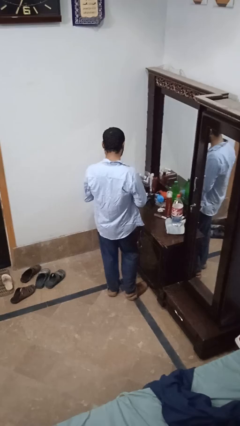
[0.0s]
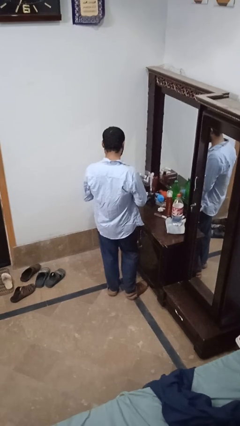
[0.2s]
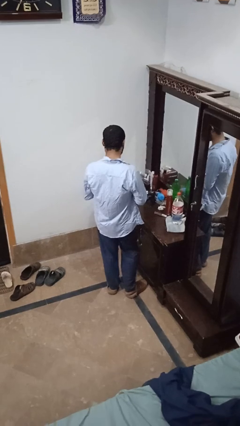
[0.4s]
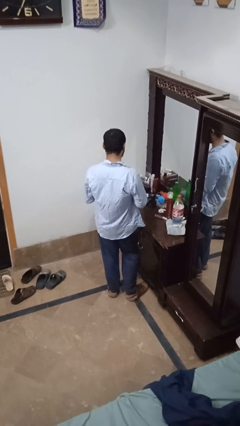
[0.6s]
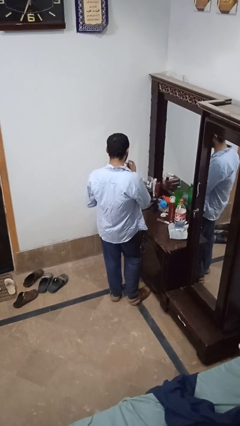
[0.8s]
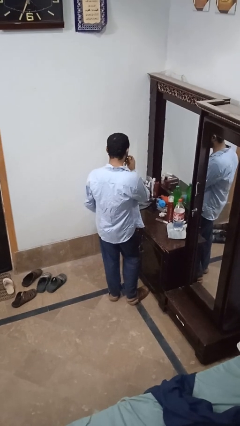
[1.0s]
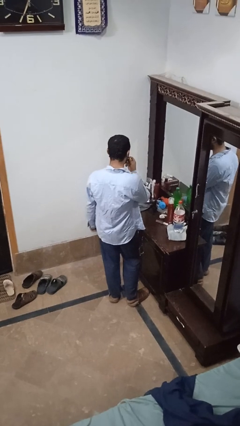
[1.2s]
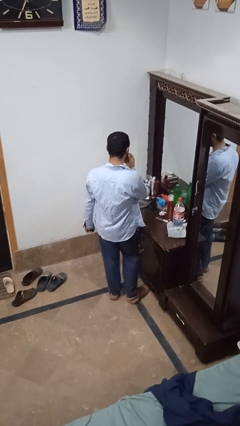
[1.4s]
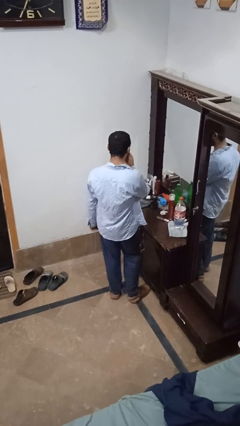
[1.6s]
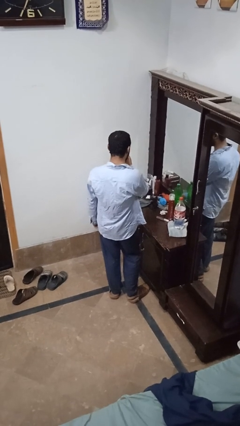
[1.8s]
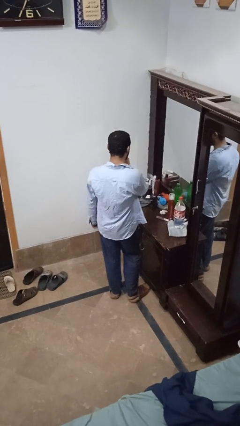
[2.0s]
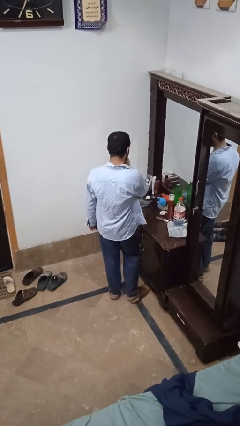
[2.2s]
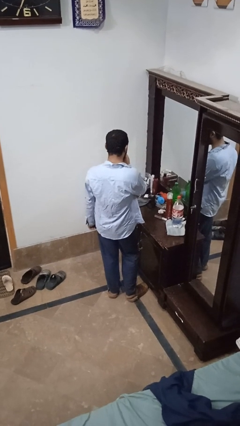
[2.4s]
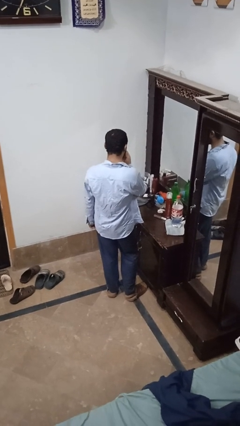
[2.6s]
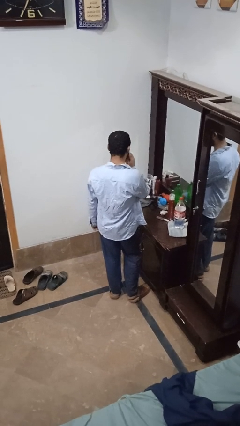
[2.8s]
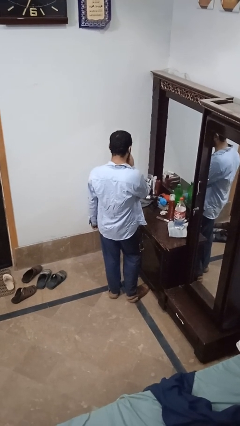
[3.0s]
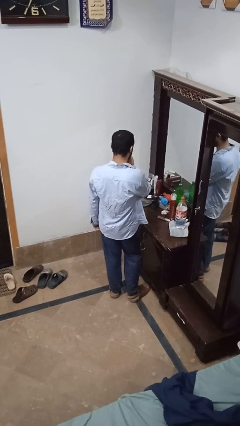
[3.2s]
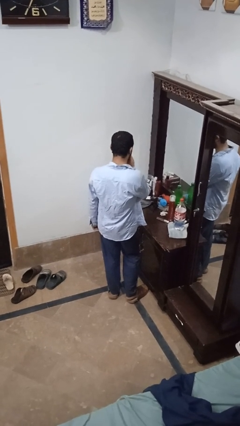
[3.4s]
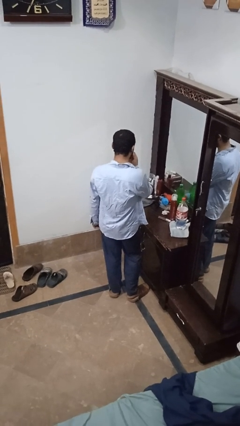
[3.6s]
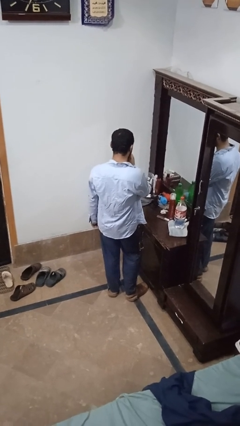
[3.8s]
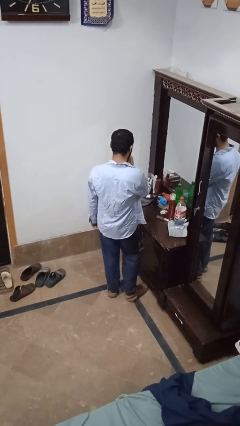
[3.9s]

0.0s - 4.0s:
person applies lip makeup

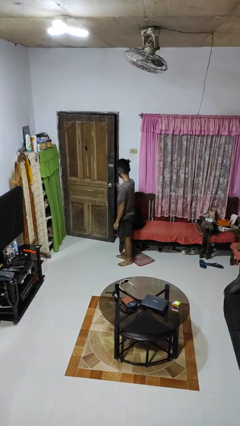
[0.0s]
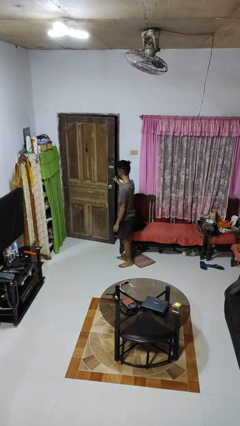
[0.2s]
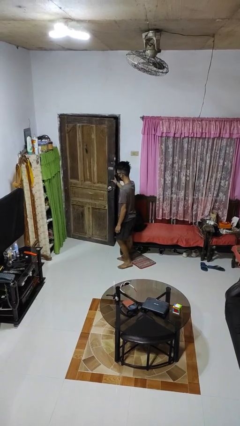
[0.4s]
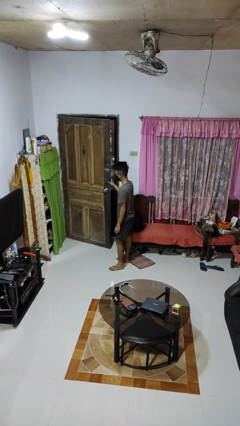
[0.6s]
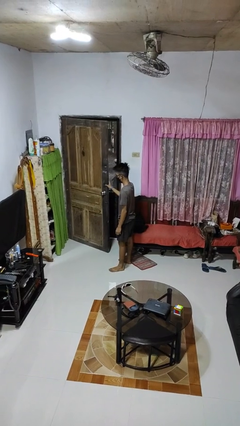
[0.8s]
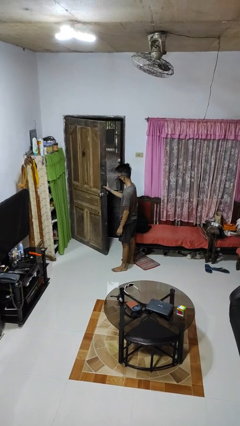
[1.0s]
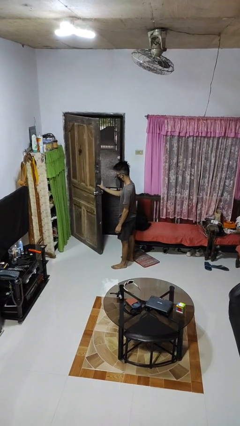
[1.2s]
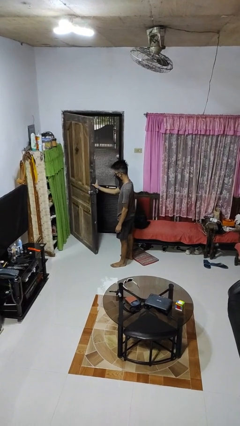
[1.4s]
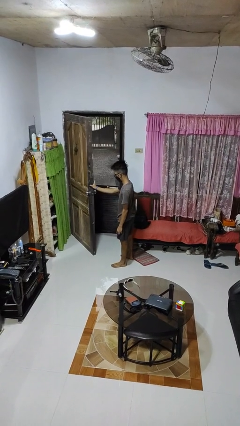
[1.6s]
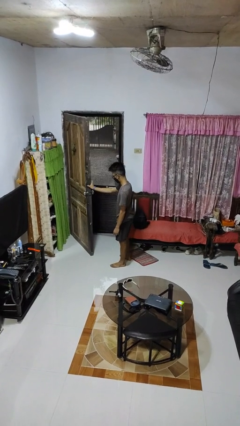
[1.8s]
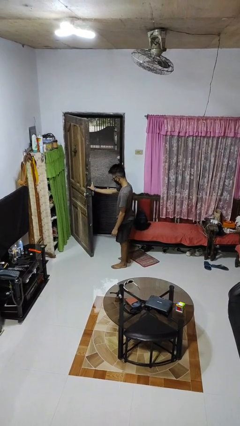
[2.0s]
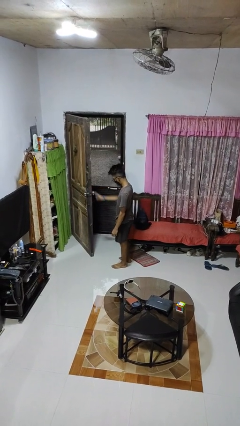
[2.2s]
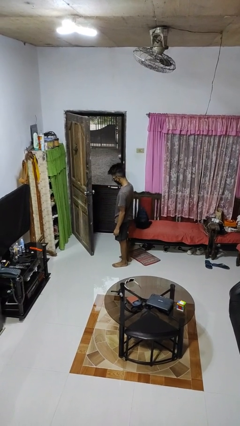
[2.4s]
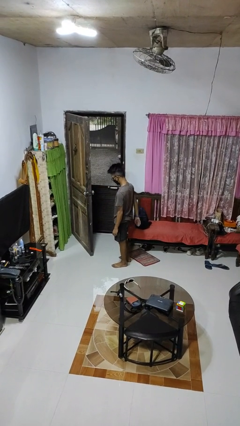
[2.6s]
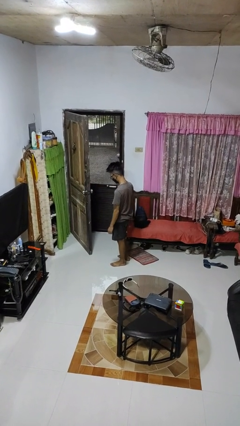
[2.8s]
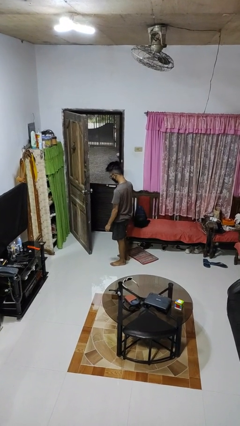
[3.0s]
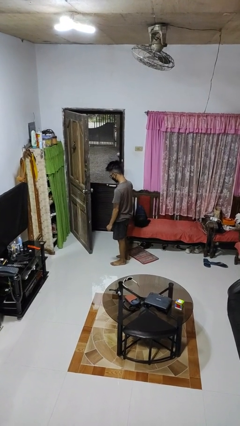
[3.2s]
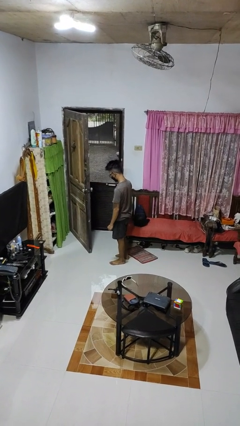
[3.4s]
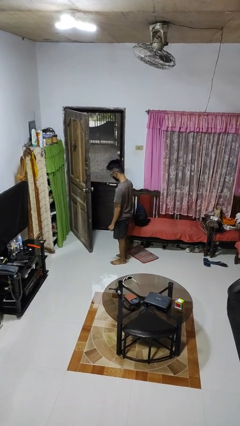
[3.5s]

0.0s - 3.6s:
person opens facility door

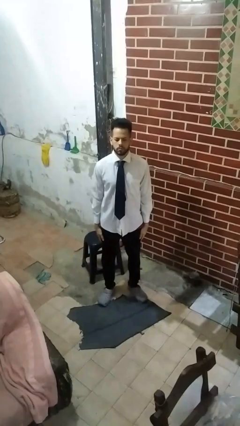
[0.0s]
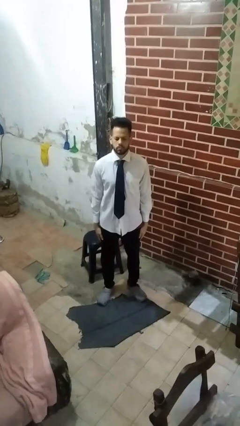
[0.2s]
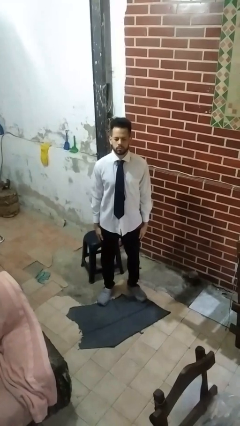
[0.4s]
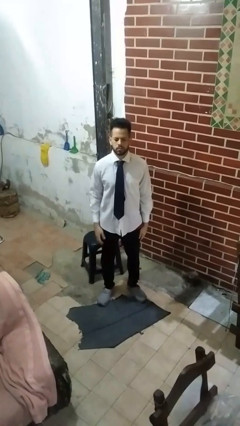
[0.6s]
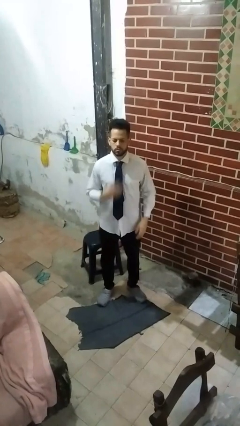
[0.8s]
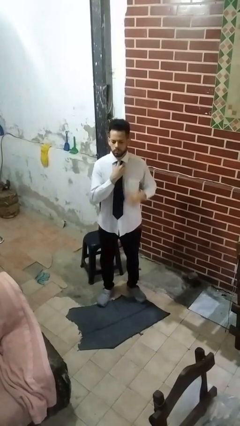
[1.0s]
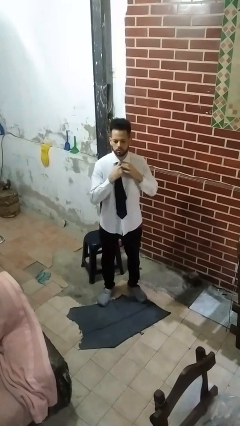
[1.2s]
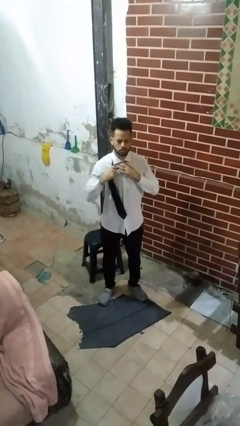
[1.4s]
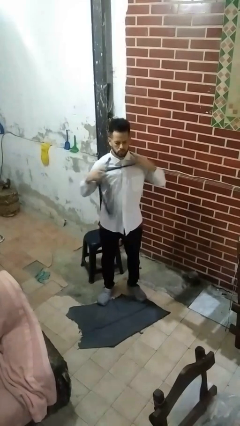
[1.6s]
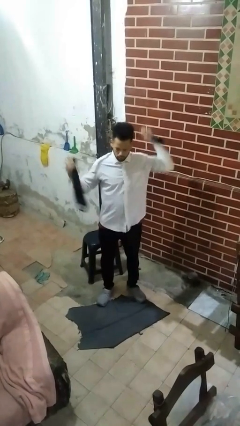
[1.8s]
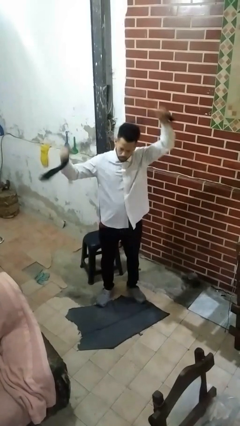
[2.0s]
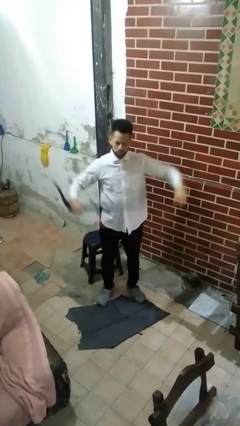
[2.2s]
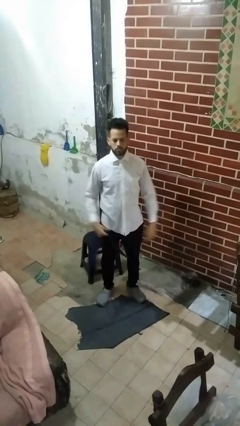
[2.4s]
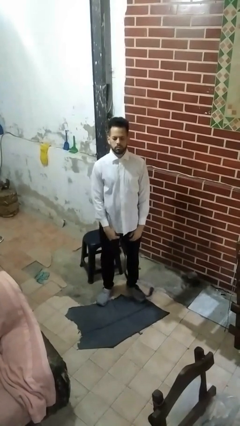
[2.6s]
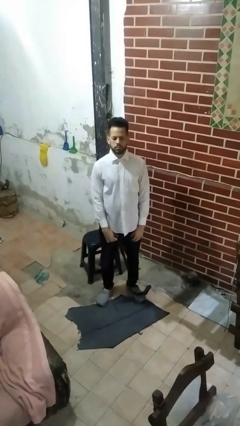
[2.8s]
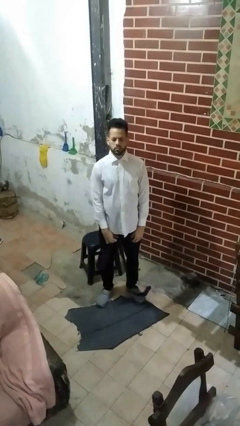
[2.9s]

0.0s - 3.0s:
person takes off necktie

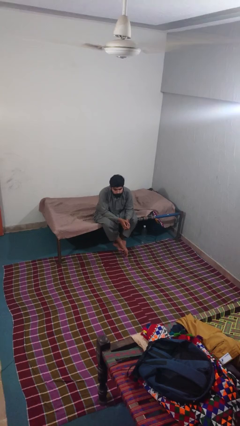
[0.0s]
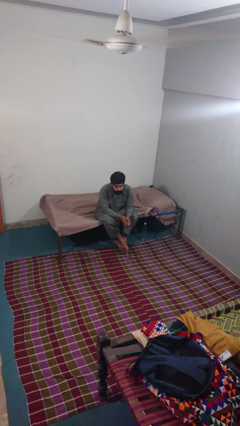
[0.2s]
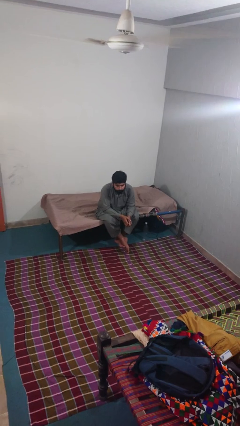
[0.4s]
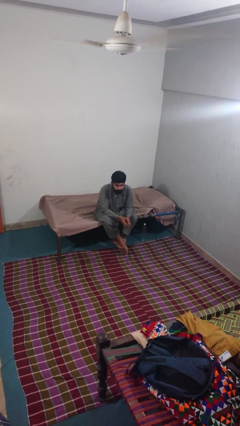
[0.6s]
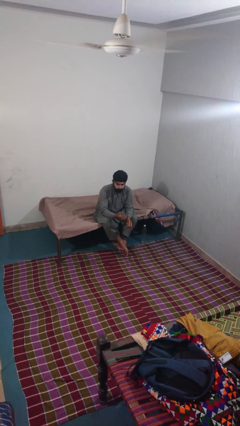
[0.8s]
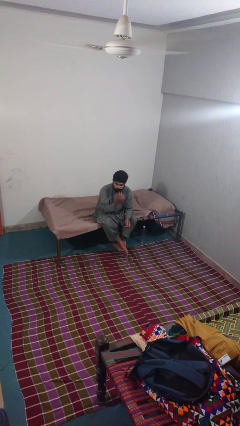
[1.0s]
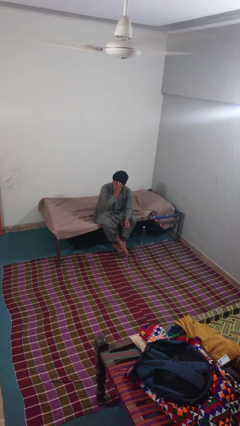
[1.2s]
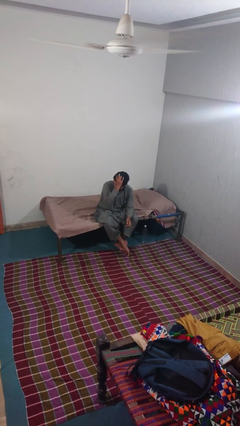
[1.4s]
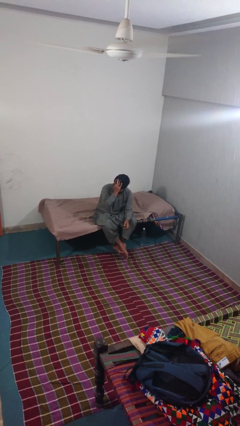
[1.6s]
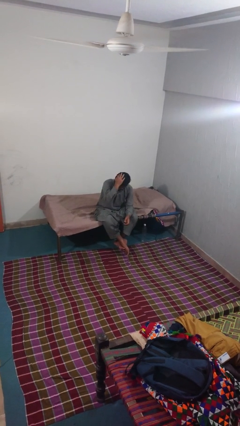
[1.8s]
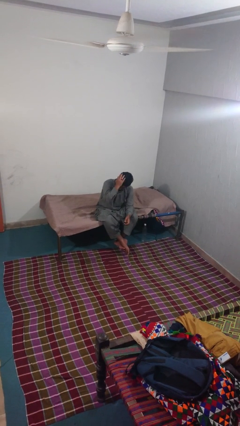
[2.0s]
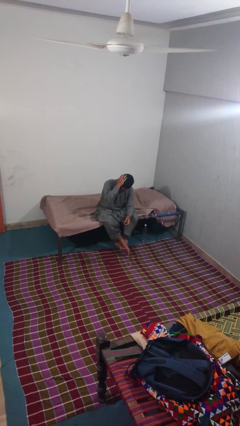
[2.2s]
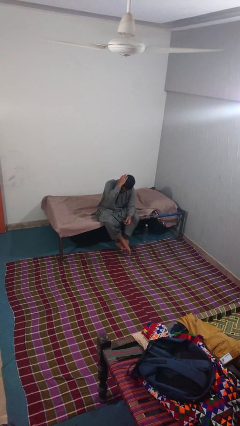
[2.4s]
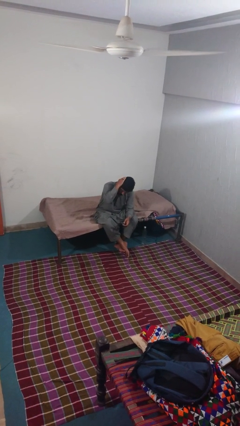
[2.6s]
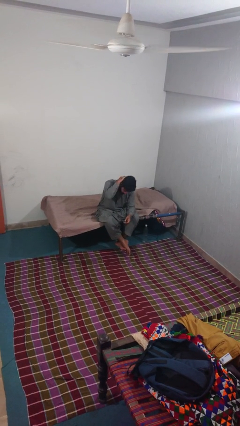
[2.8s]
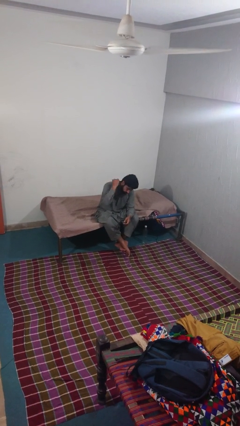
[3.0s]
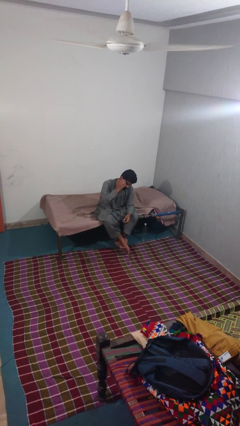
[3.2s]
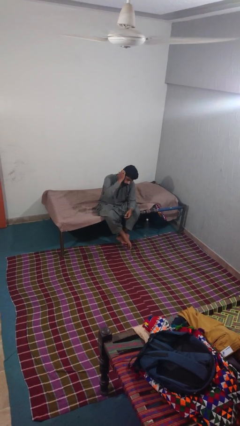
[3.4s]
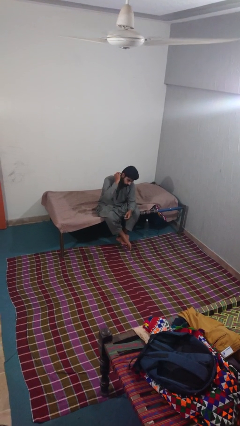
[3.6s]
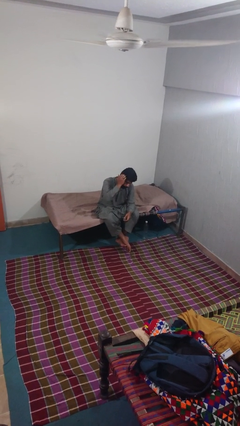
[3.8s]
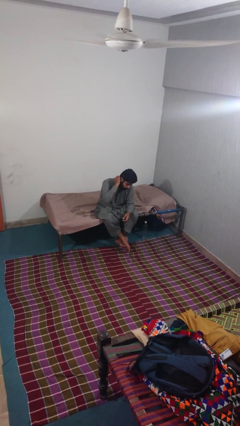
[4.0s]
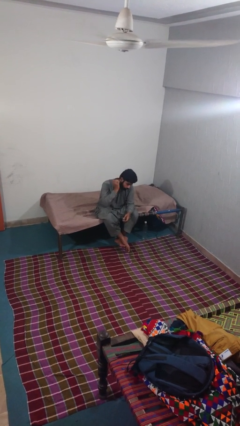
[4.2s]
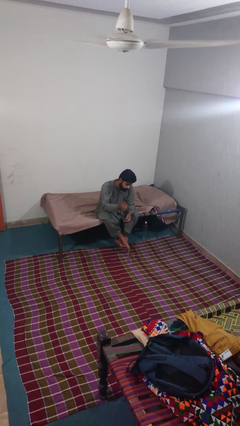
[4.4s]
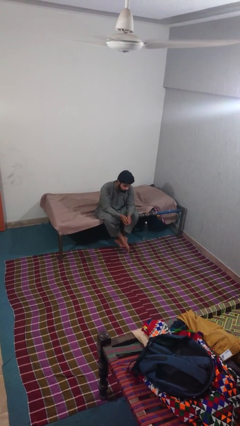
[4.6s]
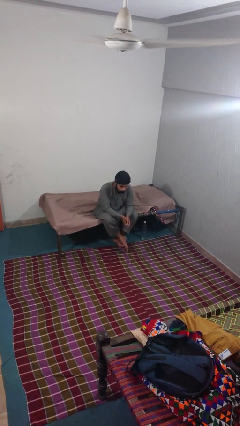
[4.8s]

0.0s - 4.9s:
person strokes hair

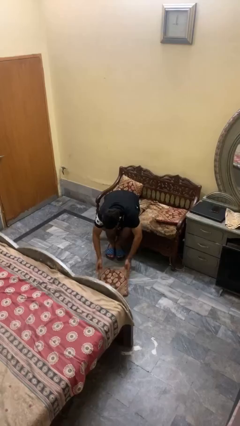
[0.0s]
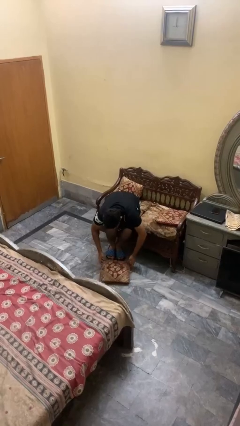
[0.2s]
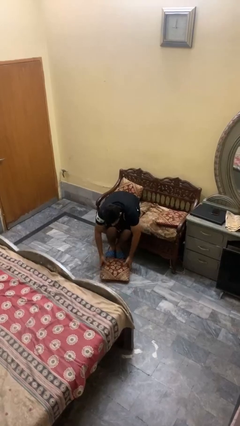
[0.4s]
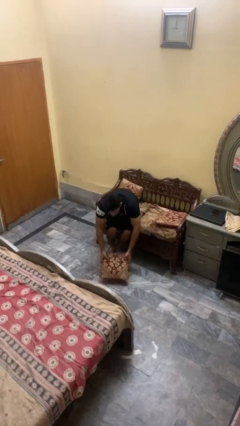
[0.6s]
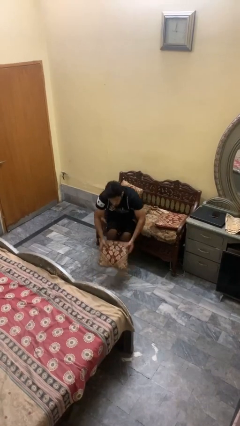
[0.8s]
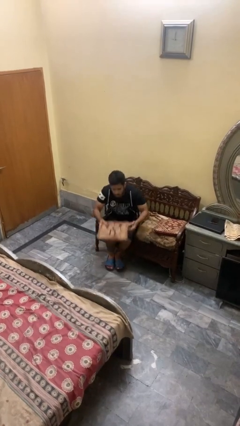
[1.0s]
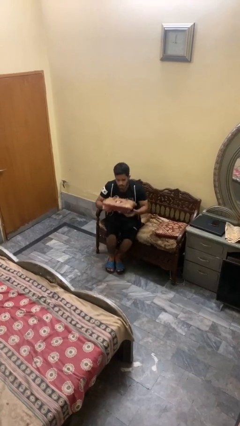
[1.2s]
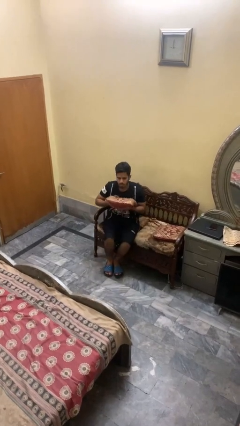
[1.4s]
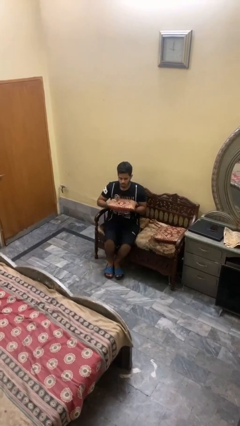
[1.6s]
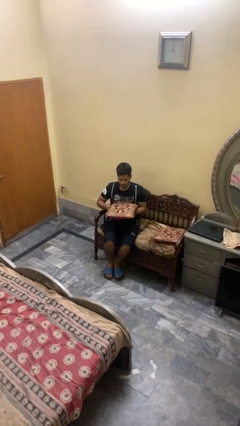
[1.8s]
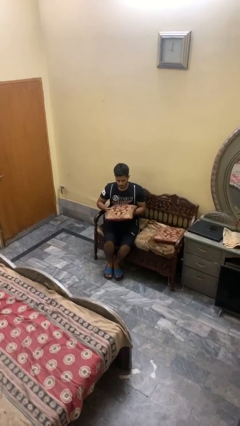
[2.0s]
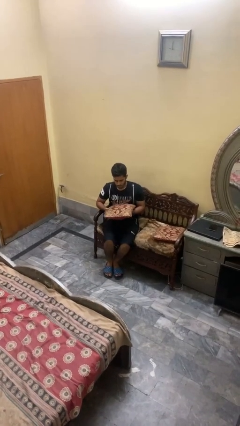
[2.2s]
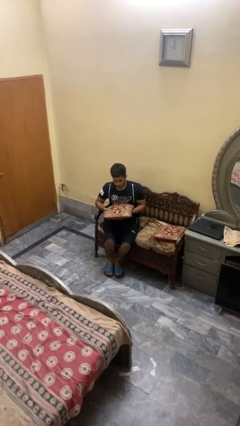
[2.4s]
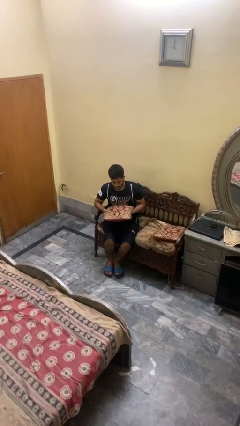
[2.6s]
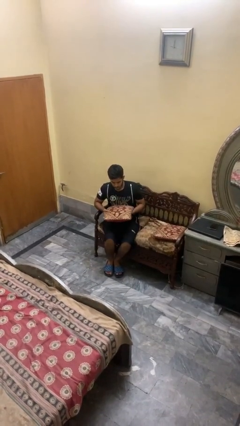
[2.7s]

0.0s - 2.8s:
person picks up object from floor
